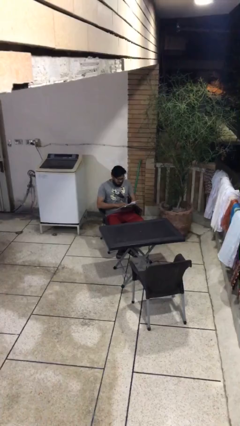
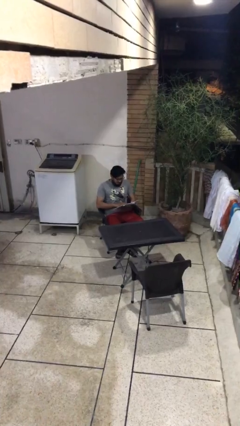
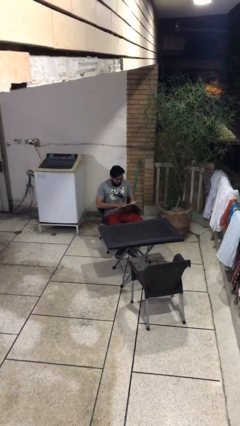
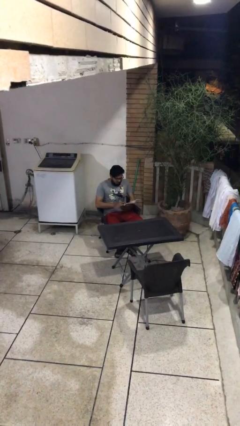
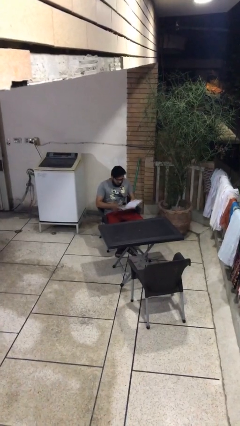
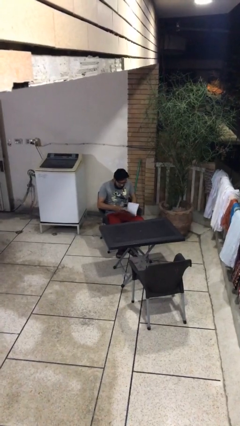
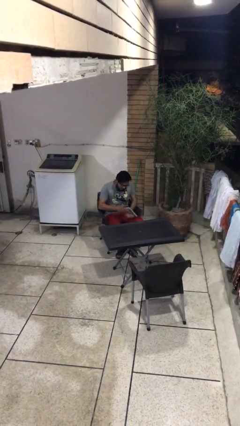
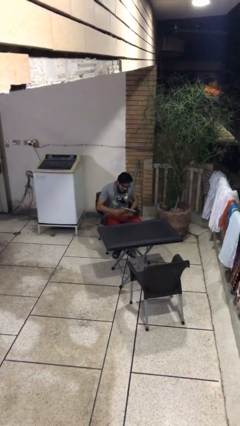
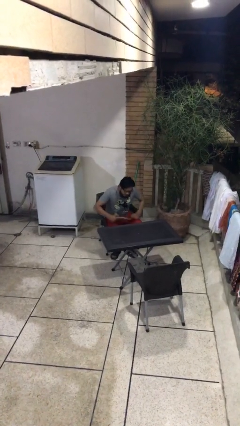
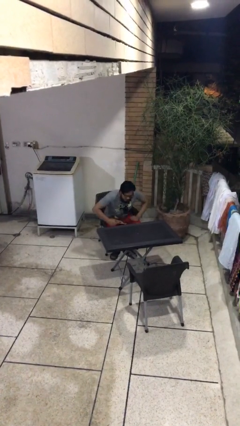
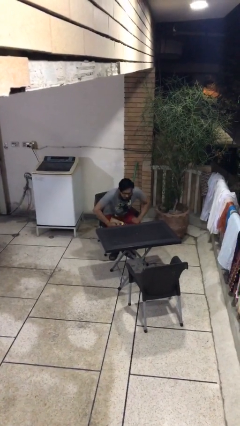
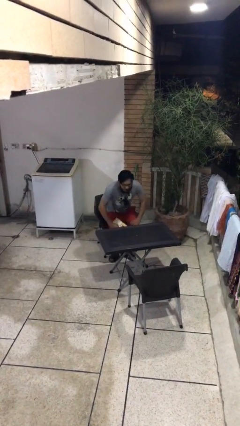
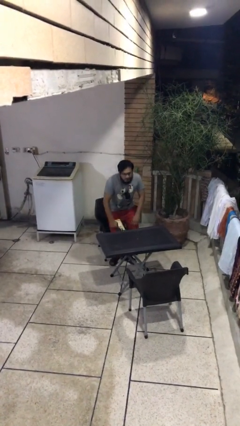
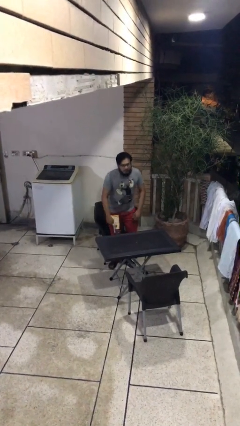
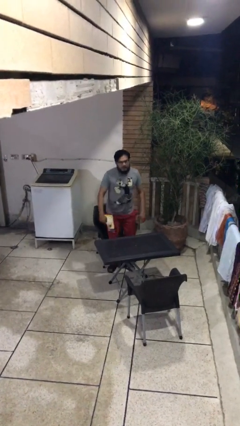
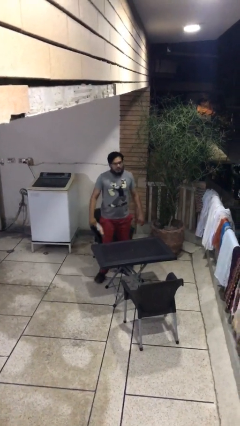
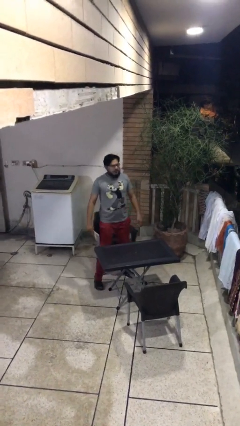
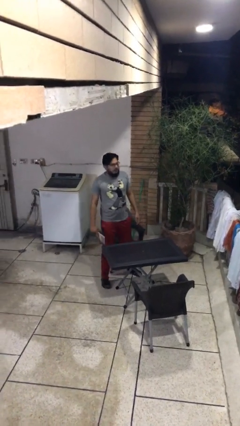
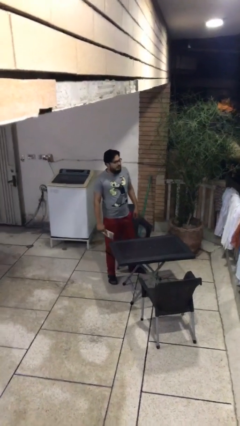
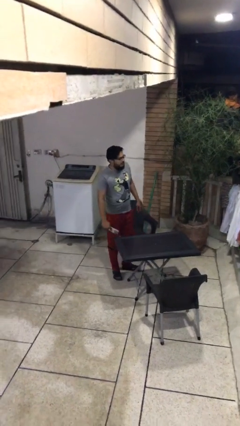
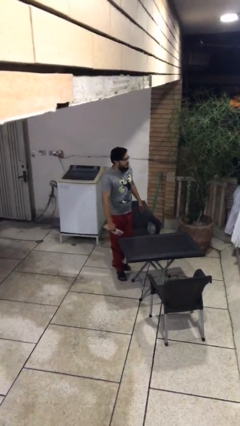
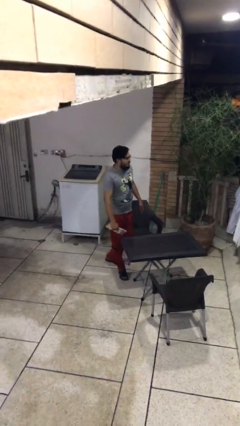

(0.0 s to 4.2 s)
person stands up

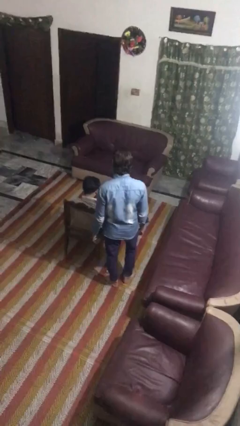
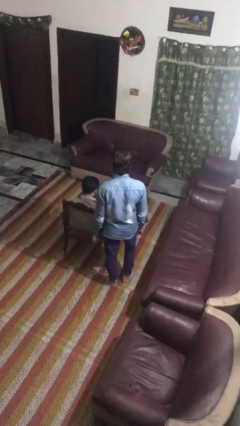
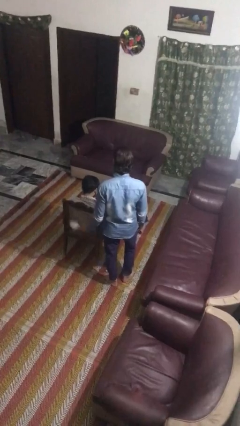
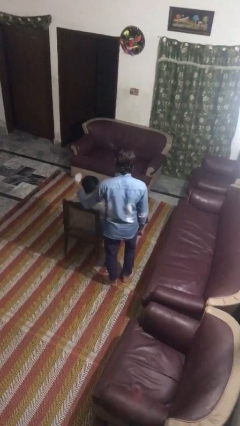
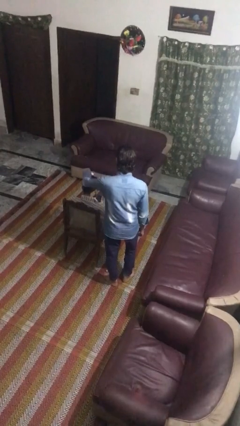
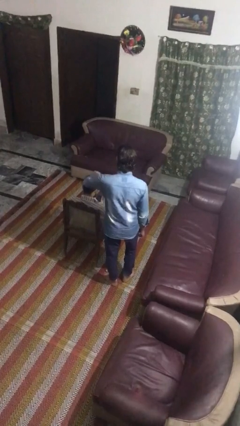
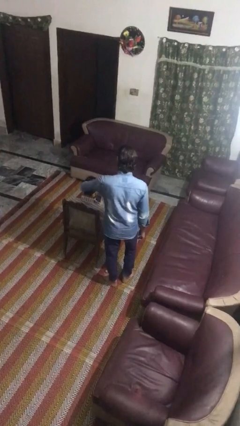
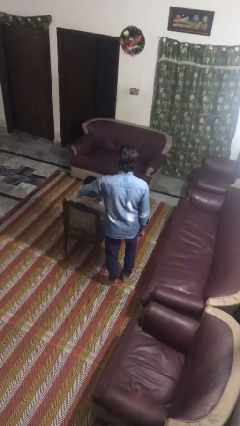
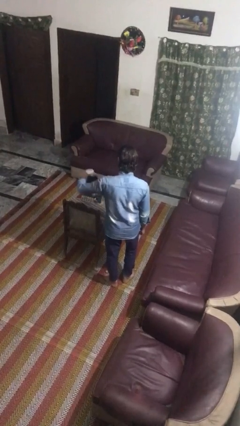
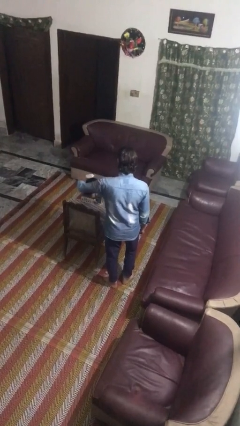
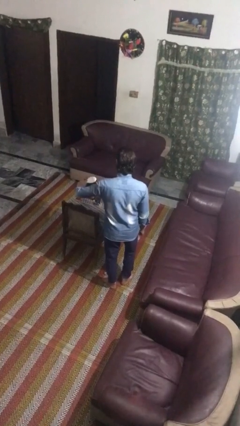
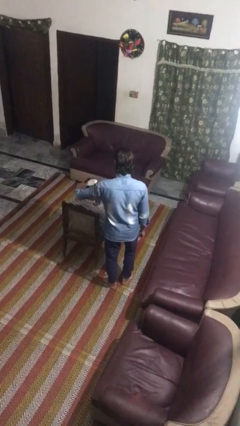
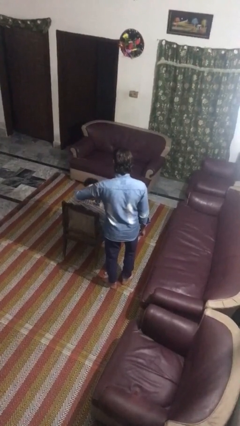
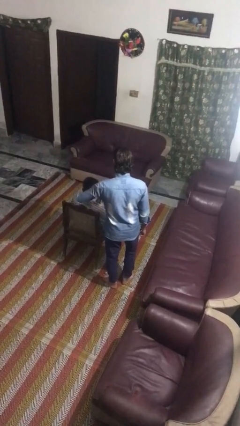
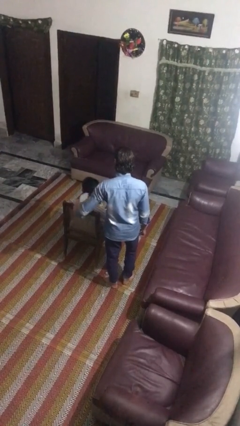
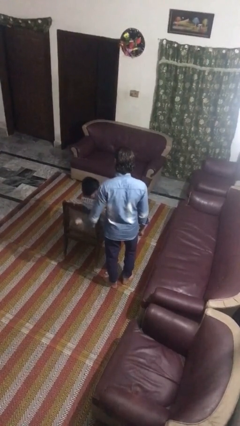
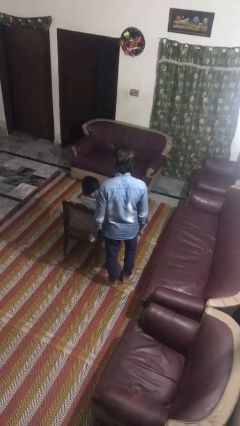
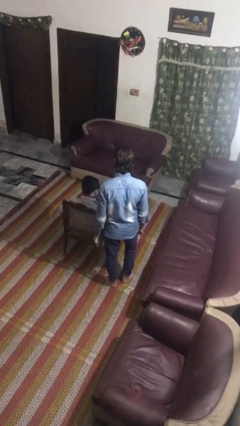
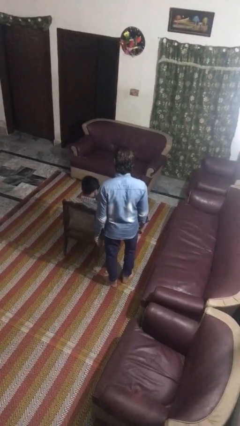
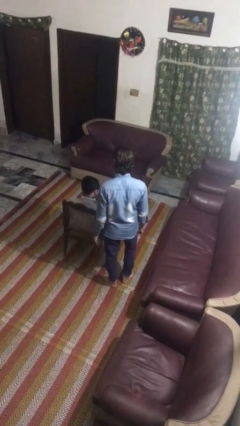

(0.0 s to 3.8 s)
person brushes hair of person

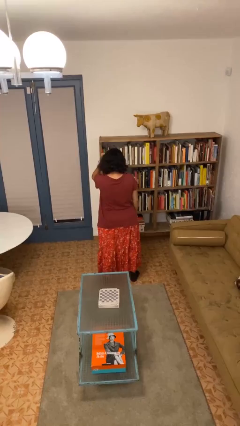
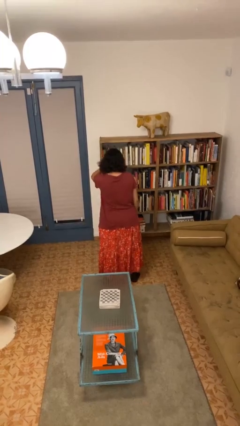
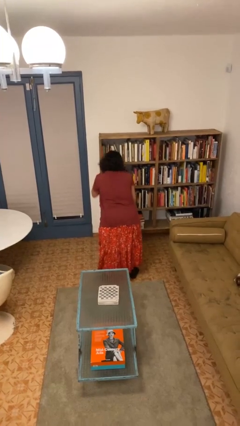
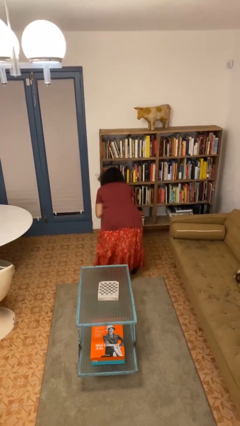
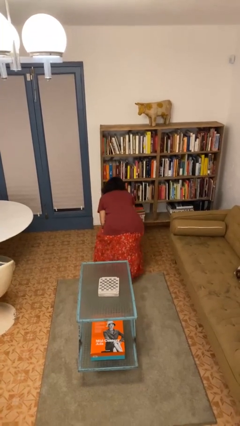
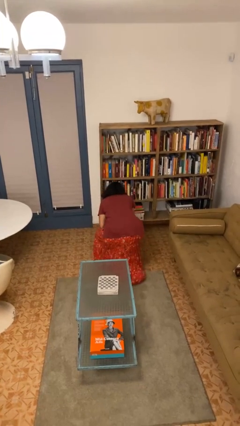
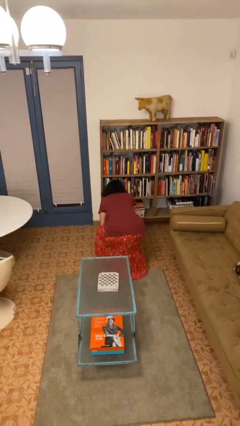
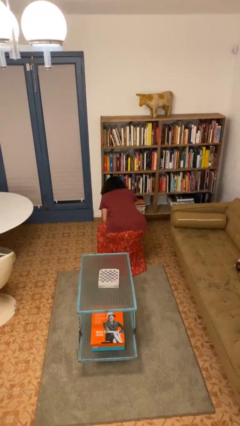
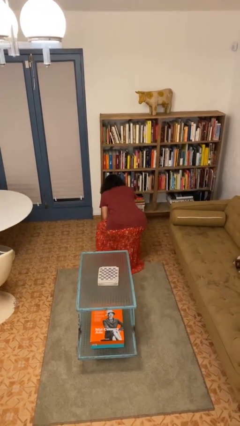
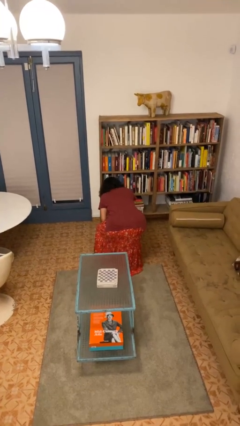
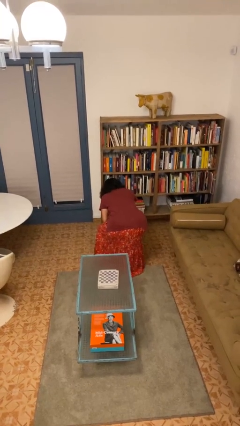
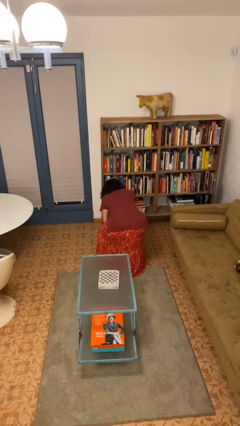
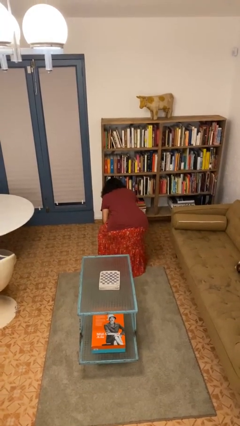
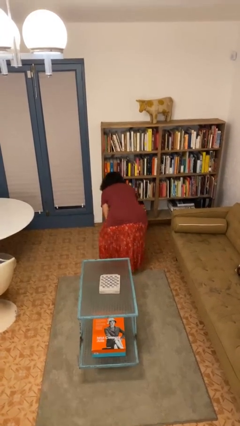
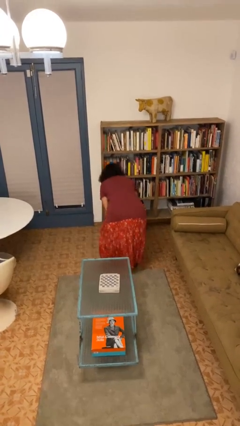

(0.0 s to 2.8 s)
person squats

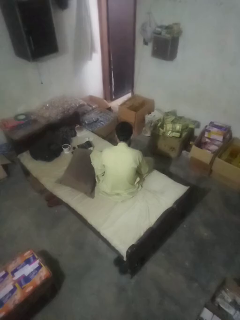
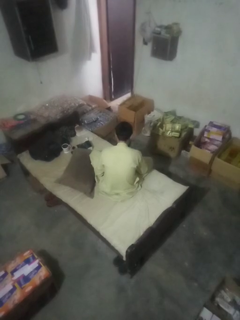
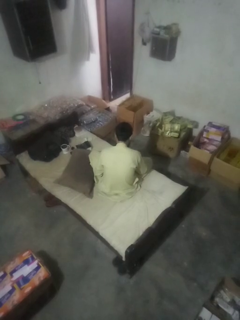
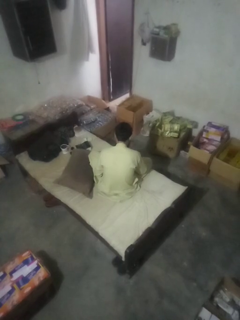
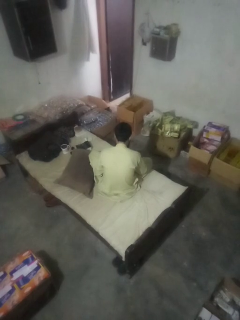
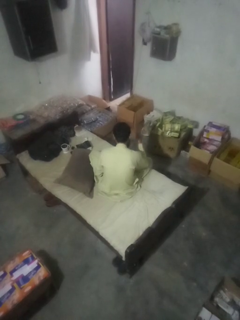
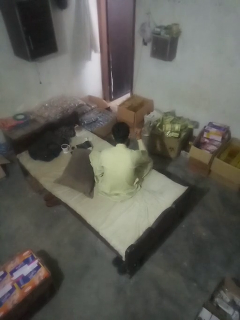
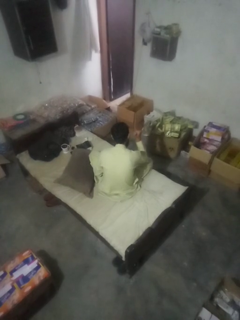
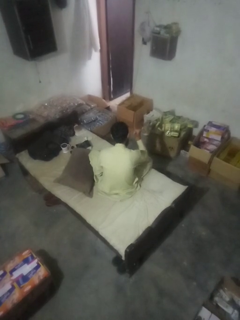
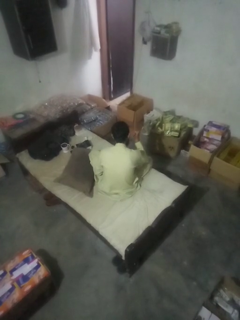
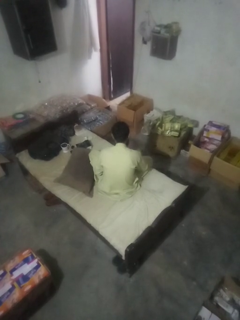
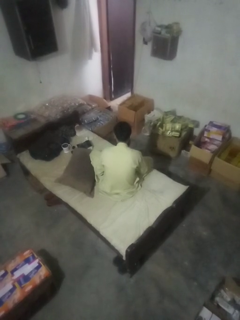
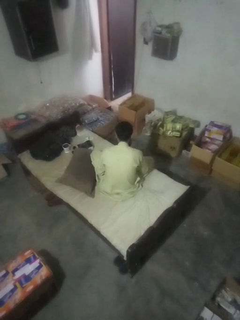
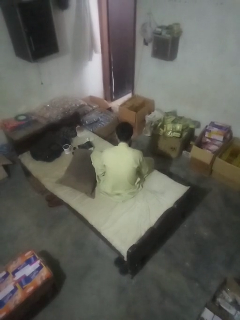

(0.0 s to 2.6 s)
person gestures behind me

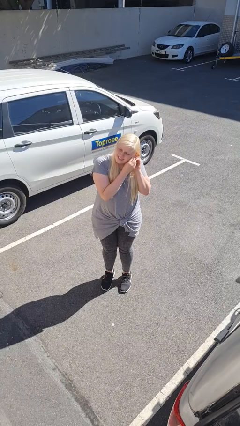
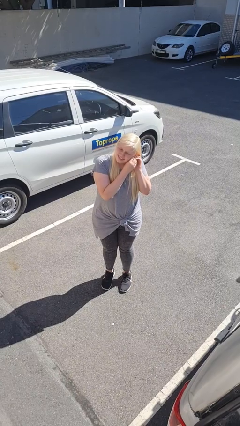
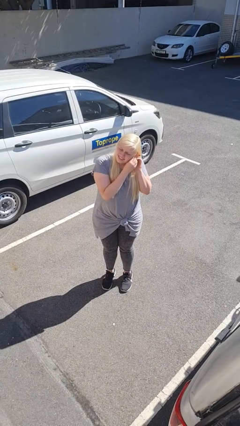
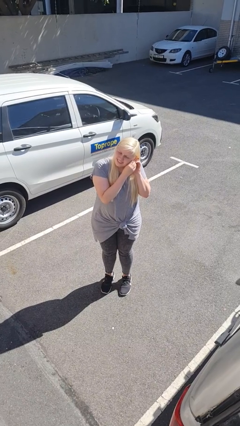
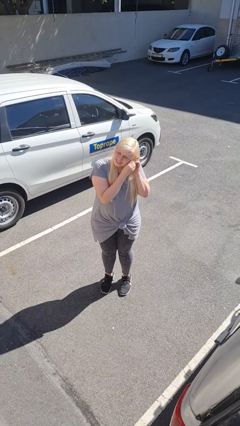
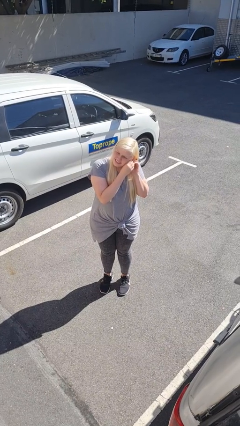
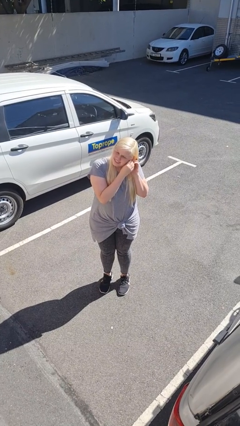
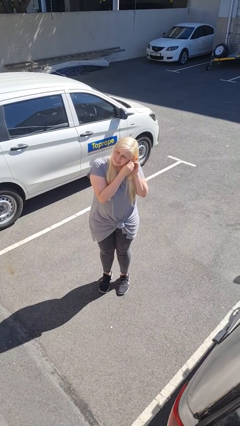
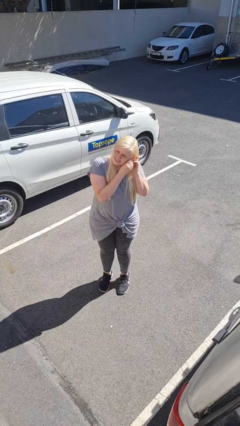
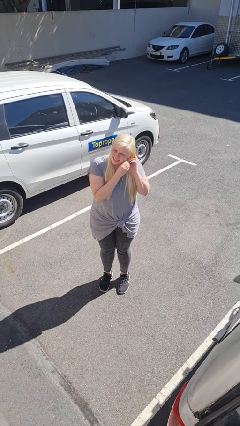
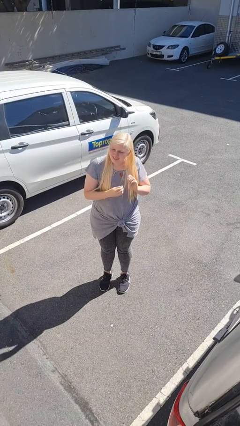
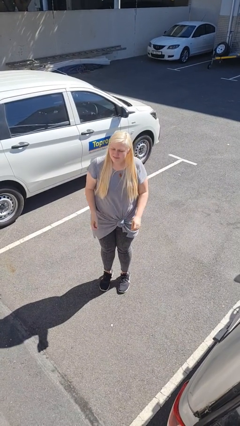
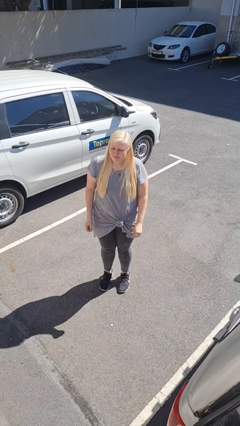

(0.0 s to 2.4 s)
person puts on earrings

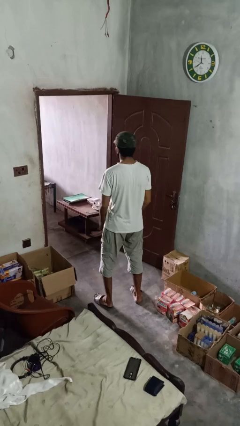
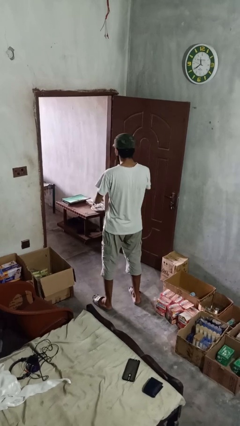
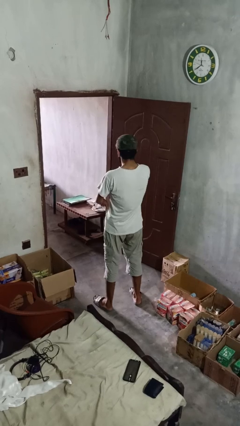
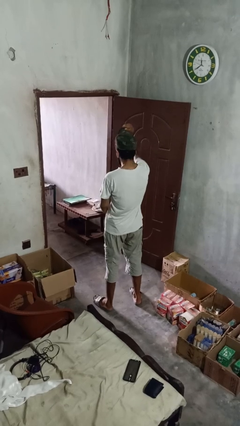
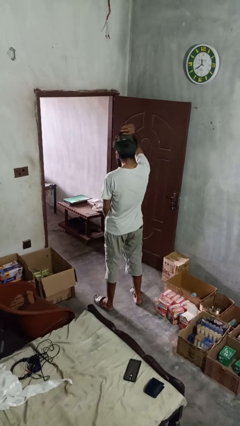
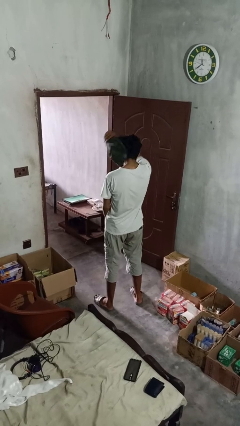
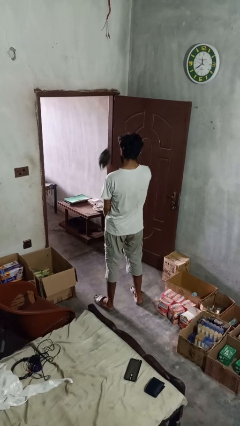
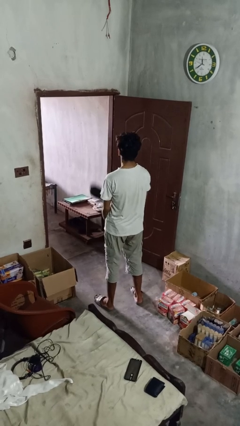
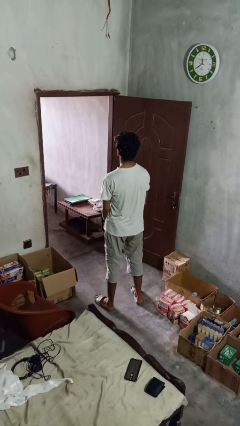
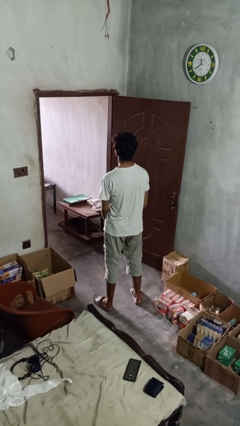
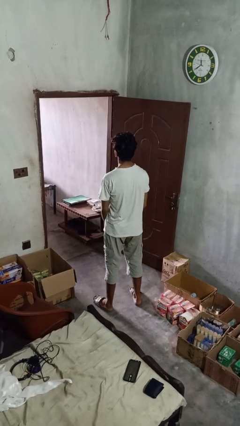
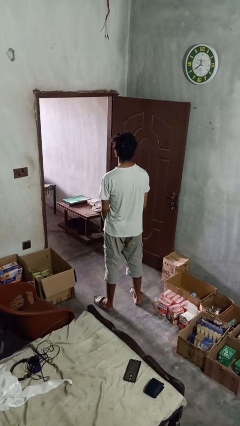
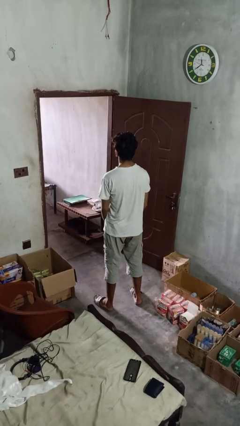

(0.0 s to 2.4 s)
person takes off hat
